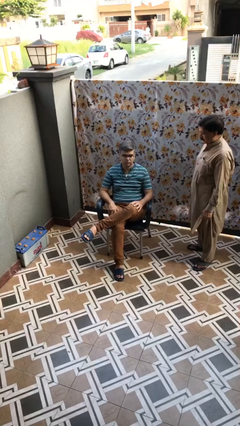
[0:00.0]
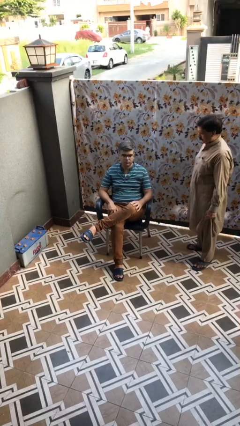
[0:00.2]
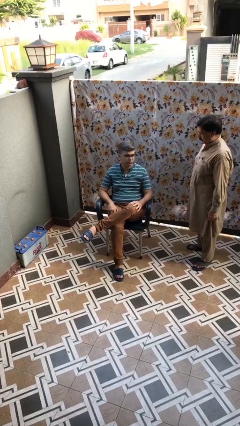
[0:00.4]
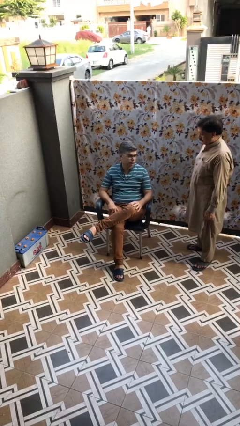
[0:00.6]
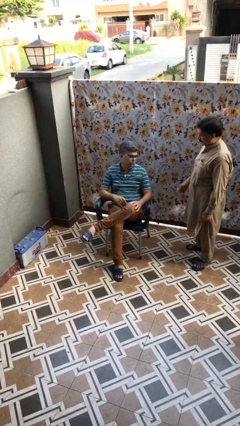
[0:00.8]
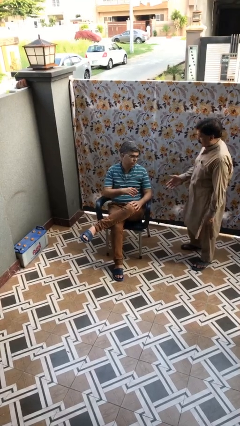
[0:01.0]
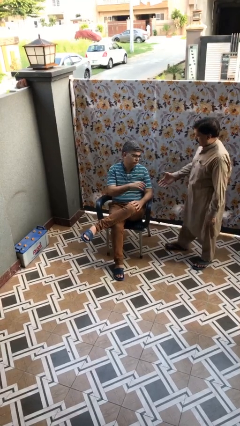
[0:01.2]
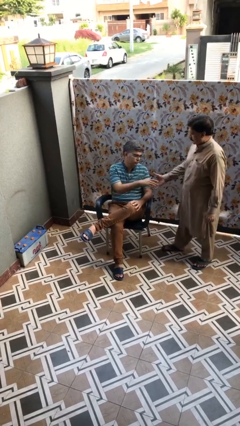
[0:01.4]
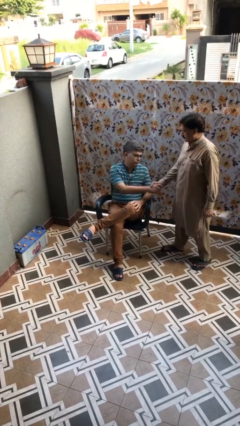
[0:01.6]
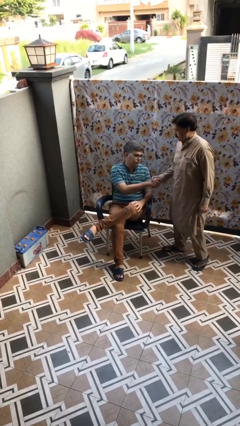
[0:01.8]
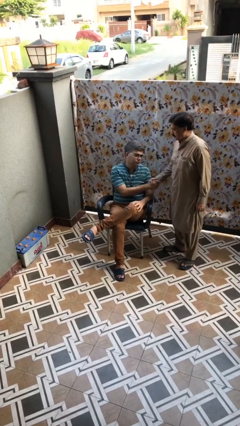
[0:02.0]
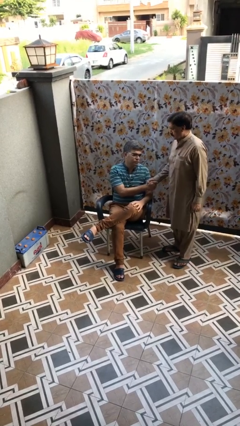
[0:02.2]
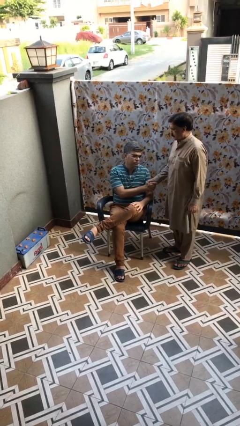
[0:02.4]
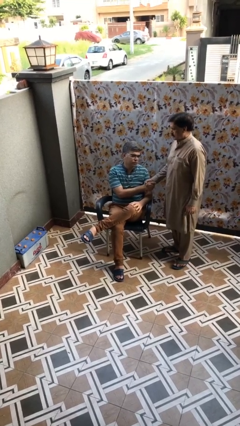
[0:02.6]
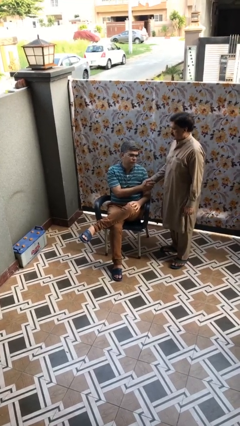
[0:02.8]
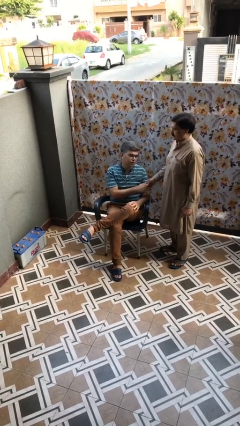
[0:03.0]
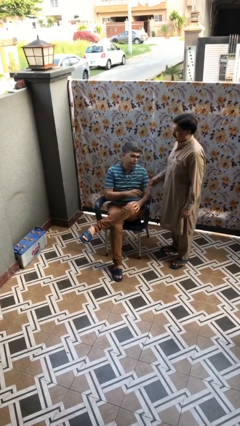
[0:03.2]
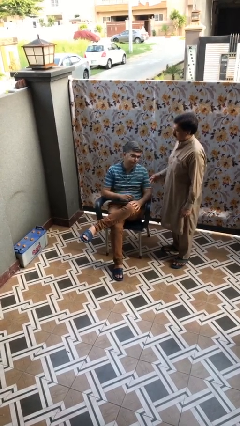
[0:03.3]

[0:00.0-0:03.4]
person shakes hand

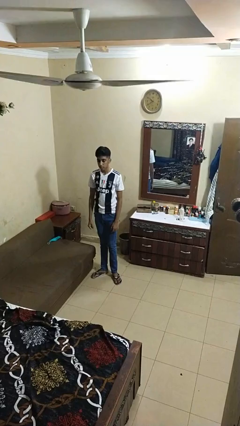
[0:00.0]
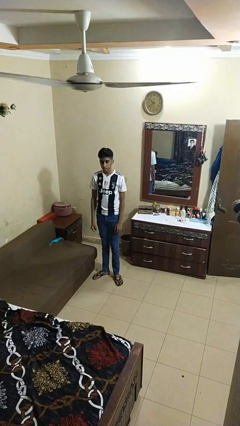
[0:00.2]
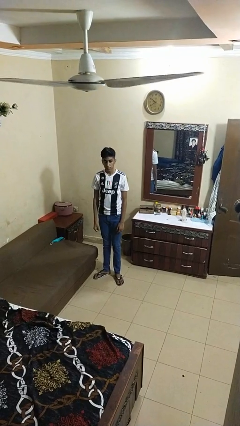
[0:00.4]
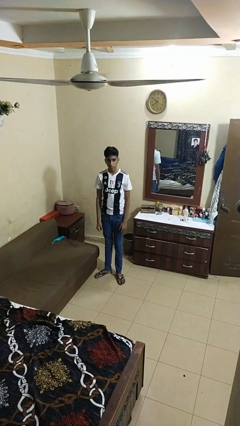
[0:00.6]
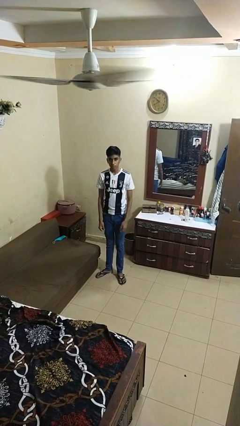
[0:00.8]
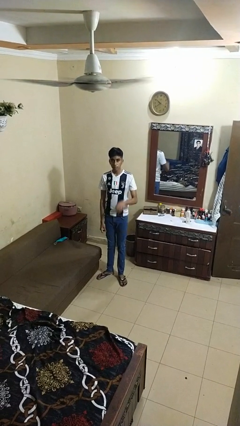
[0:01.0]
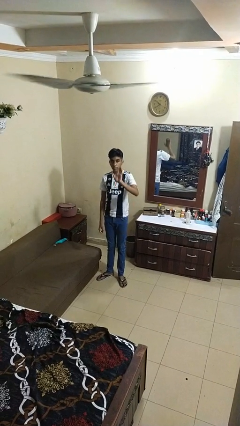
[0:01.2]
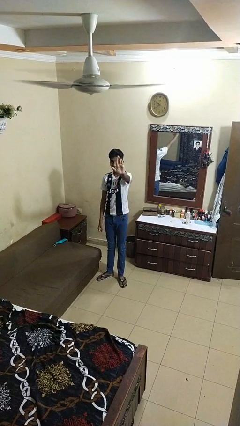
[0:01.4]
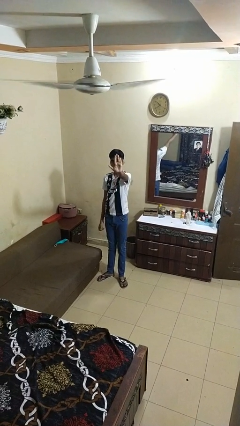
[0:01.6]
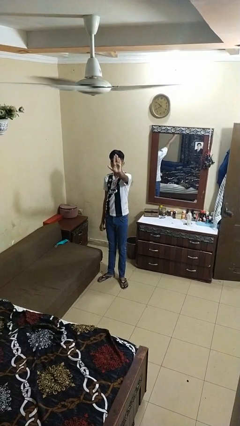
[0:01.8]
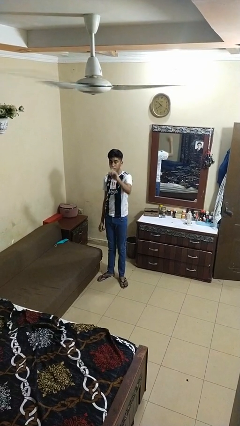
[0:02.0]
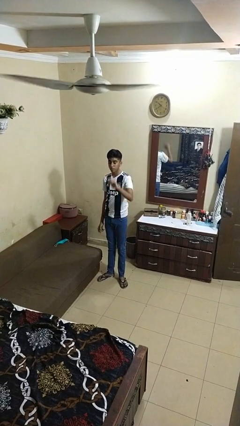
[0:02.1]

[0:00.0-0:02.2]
person gestures stop

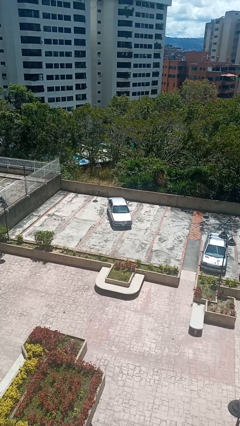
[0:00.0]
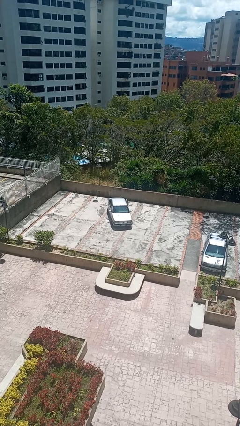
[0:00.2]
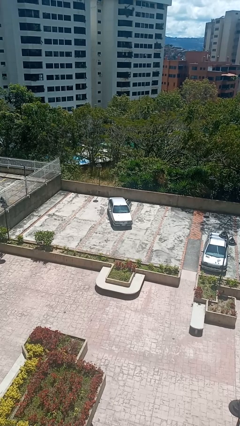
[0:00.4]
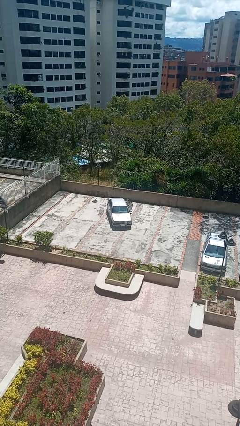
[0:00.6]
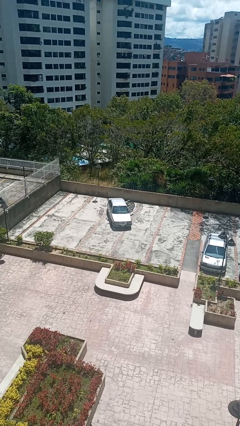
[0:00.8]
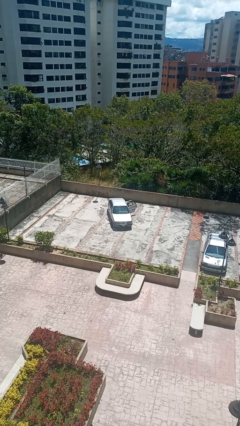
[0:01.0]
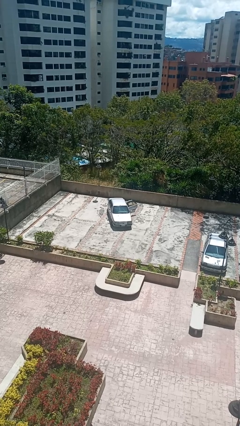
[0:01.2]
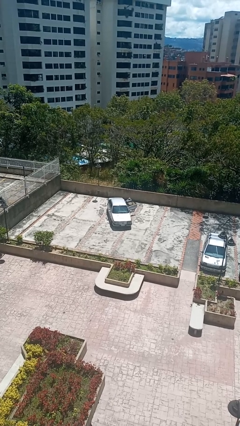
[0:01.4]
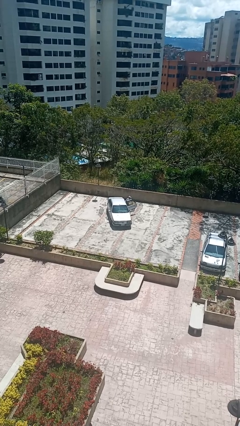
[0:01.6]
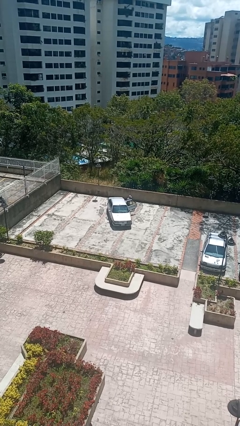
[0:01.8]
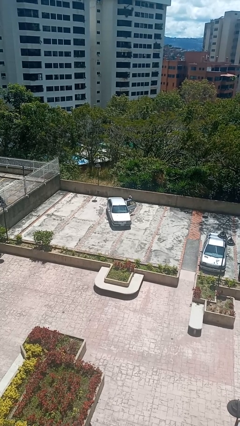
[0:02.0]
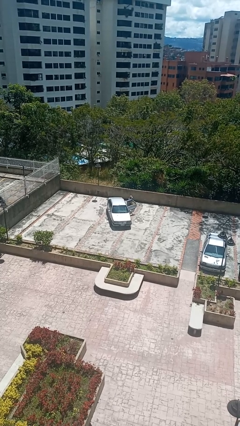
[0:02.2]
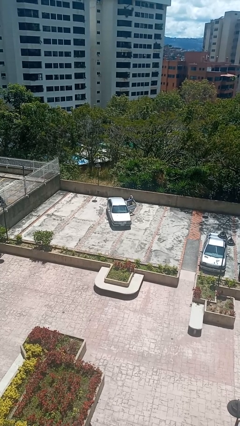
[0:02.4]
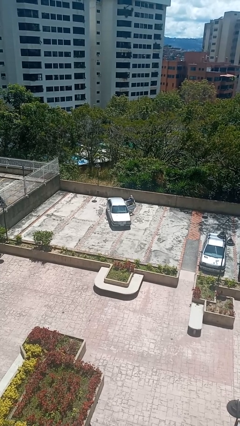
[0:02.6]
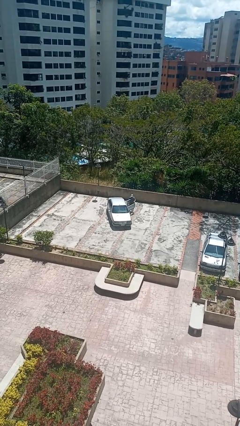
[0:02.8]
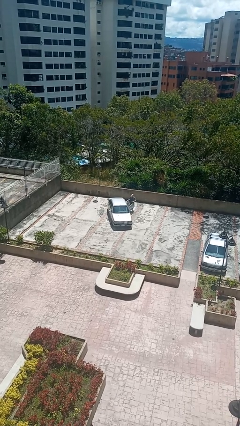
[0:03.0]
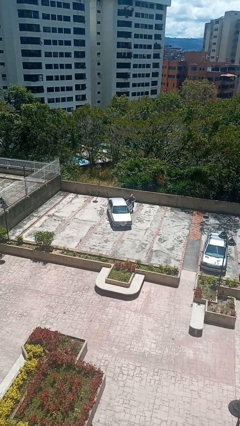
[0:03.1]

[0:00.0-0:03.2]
car drops off person

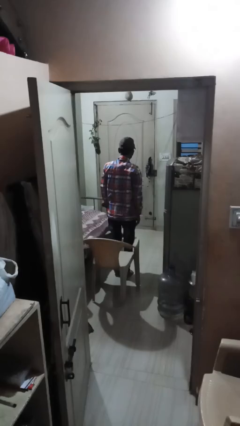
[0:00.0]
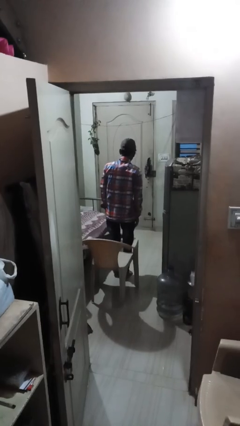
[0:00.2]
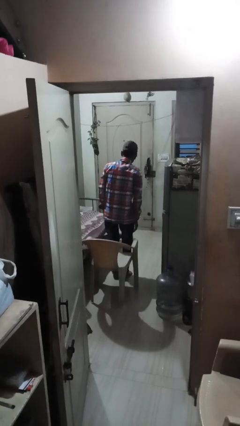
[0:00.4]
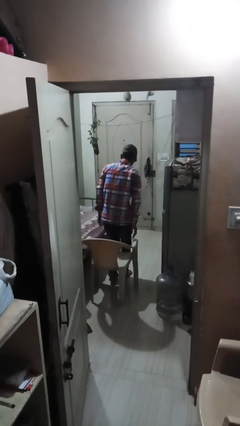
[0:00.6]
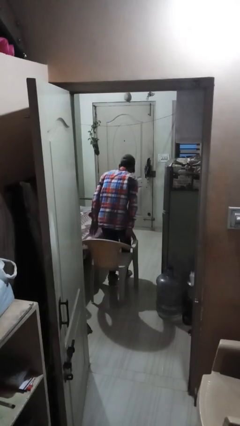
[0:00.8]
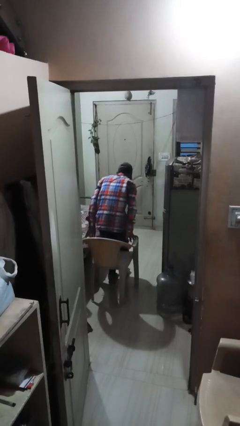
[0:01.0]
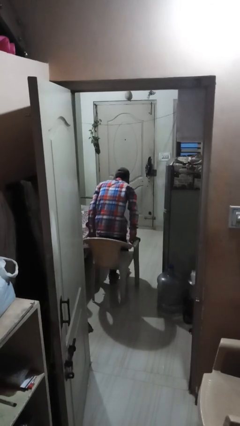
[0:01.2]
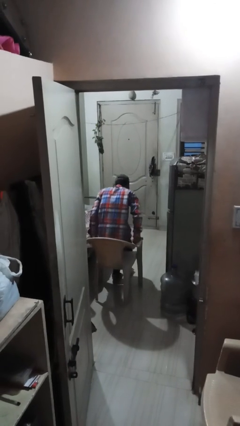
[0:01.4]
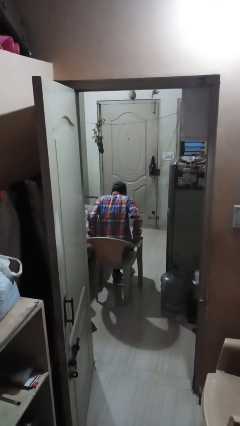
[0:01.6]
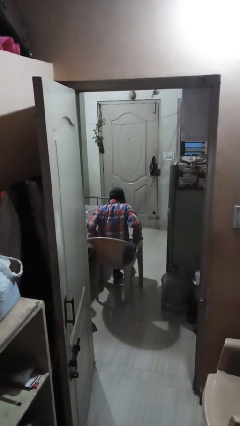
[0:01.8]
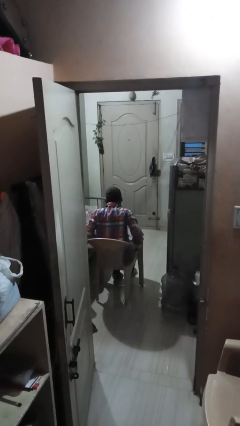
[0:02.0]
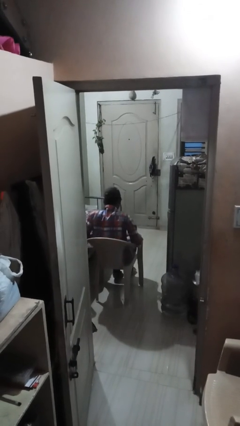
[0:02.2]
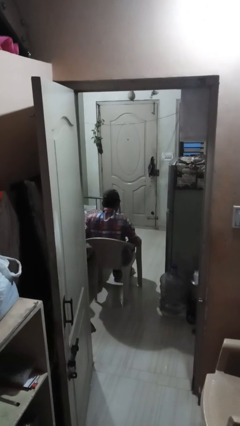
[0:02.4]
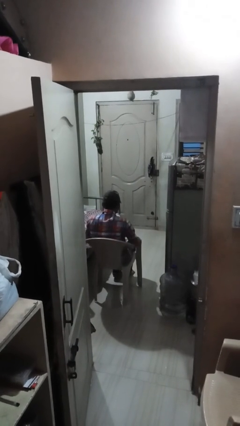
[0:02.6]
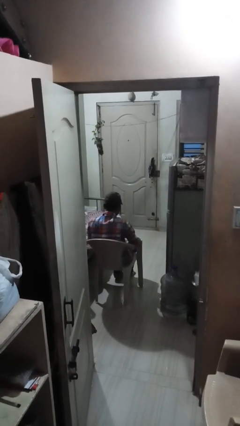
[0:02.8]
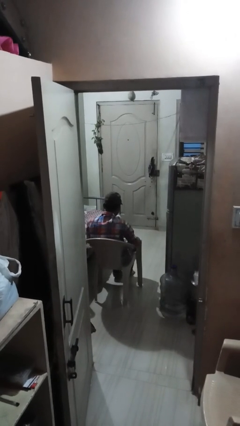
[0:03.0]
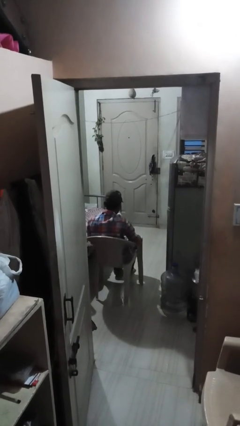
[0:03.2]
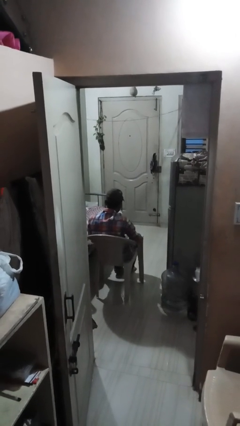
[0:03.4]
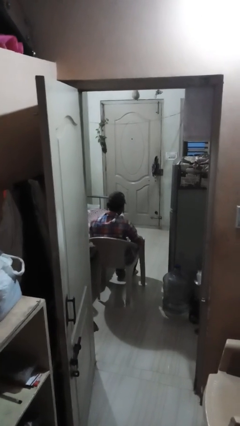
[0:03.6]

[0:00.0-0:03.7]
person sits down

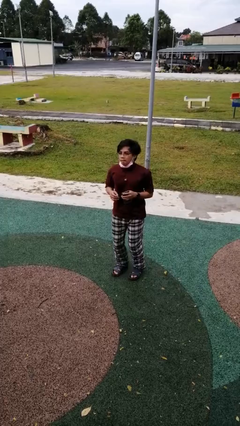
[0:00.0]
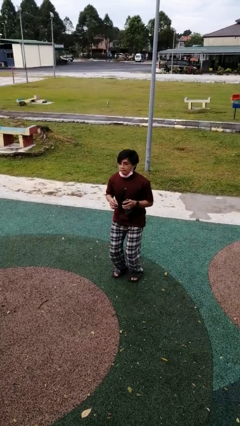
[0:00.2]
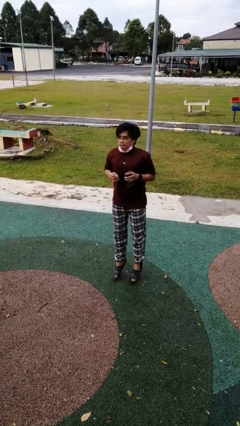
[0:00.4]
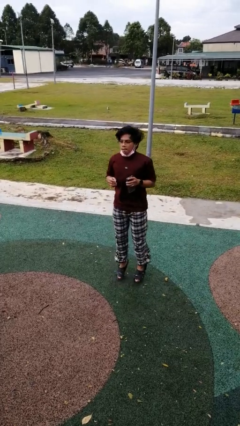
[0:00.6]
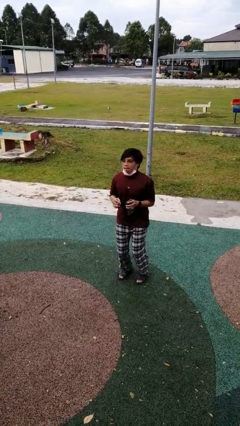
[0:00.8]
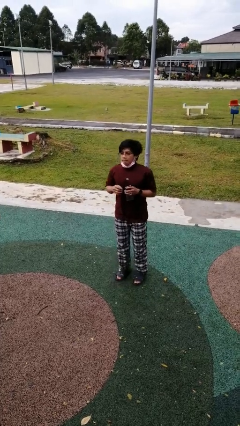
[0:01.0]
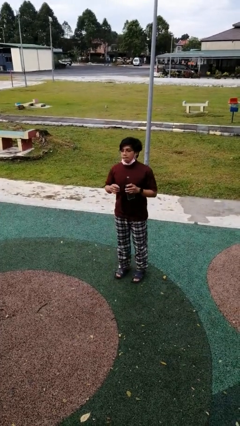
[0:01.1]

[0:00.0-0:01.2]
person jumps

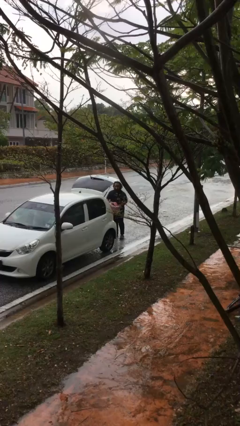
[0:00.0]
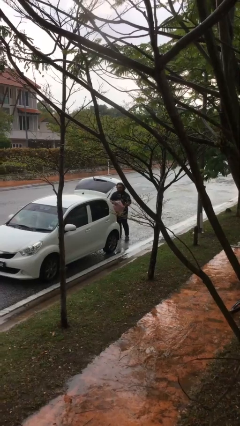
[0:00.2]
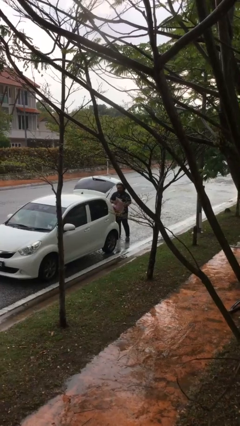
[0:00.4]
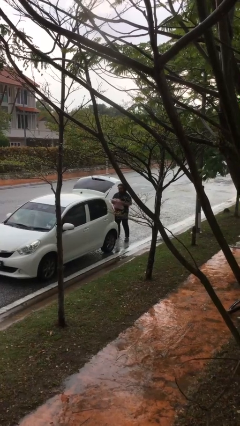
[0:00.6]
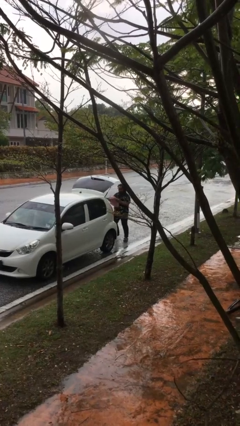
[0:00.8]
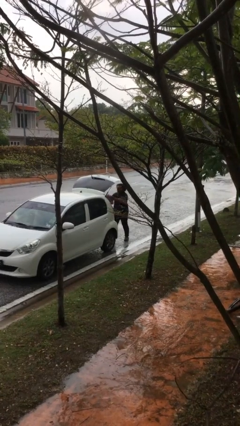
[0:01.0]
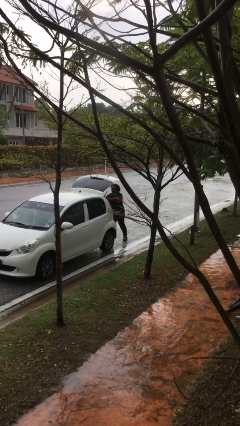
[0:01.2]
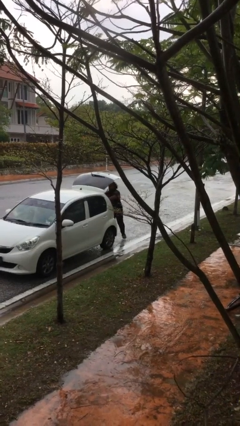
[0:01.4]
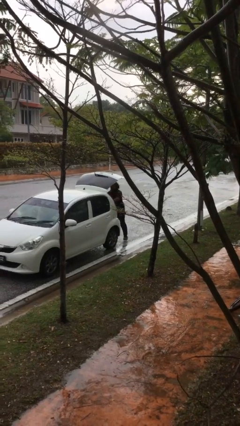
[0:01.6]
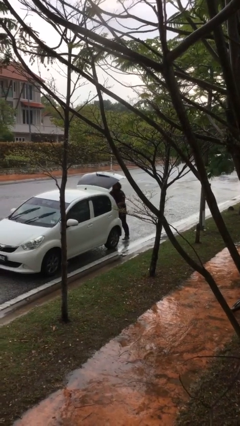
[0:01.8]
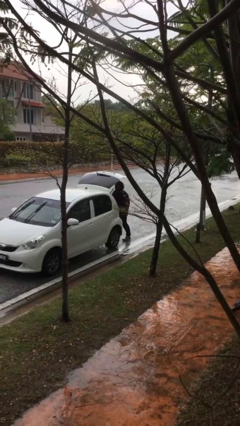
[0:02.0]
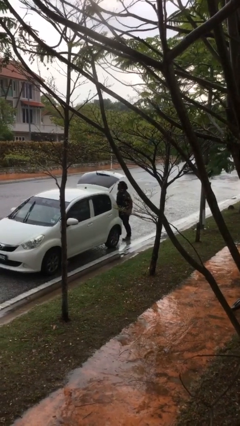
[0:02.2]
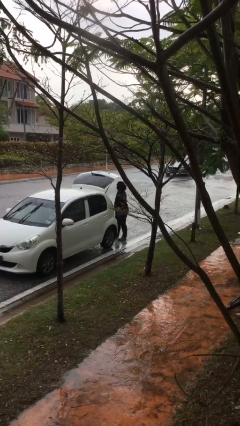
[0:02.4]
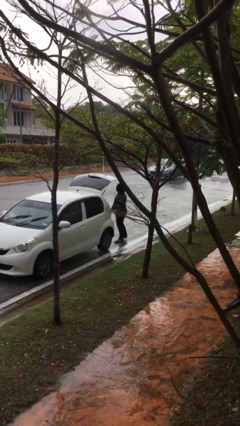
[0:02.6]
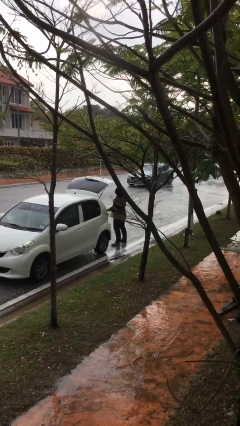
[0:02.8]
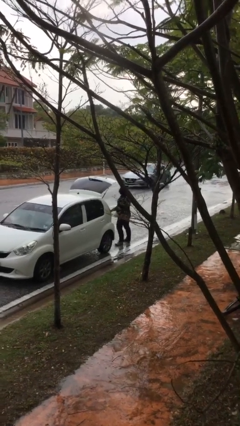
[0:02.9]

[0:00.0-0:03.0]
person loads car

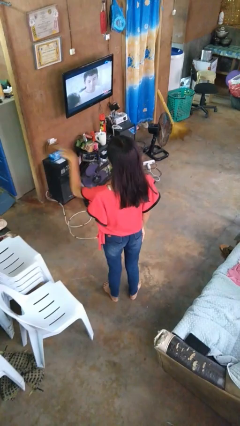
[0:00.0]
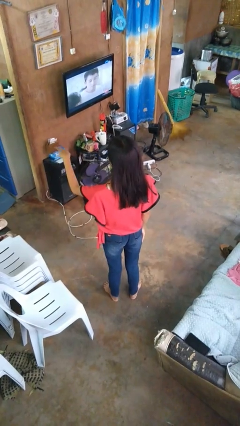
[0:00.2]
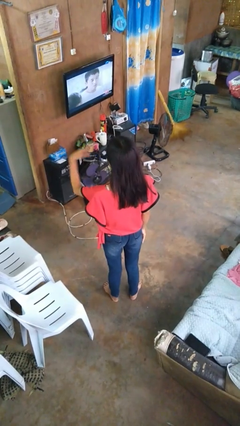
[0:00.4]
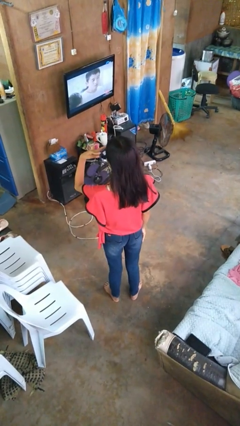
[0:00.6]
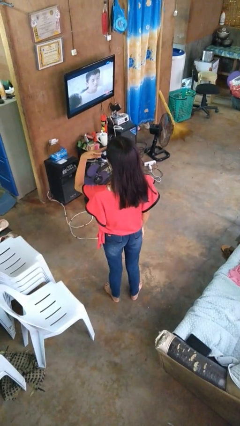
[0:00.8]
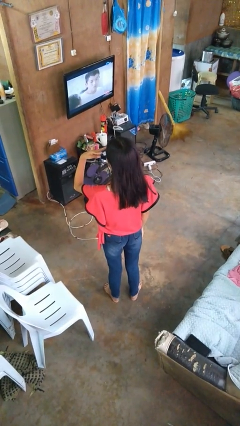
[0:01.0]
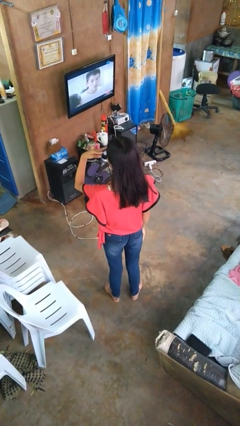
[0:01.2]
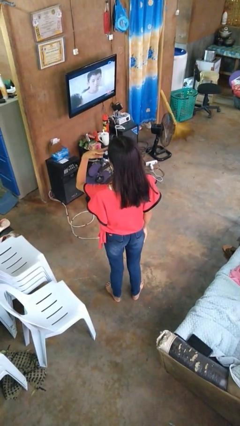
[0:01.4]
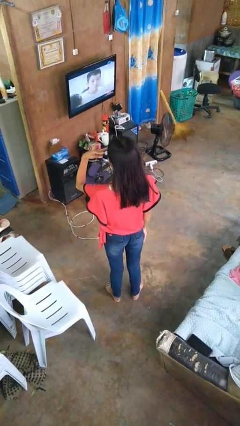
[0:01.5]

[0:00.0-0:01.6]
person gestures watch closely
